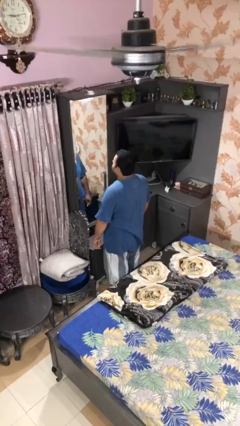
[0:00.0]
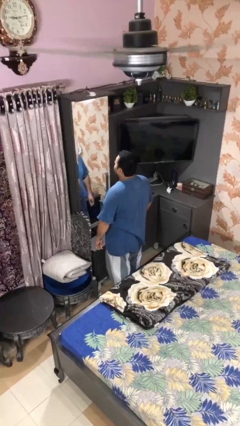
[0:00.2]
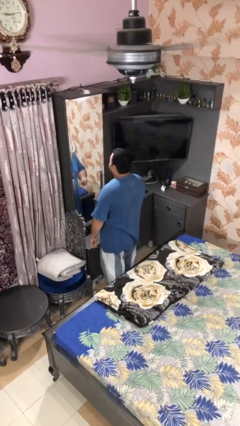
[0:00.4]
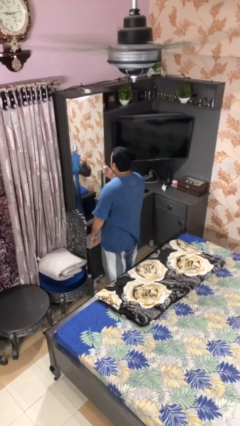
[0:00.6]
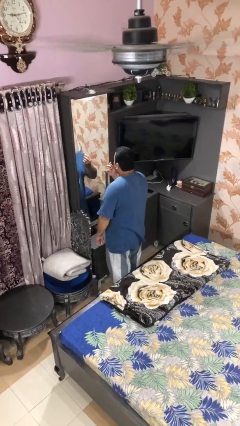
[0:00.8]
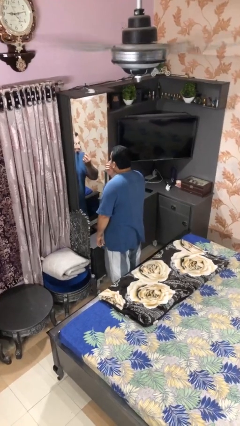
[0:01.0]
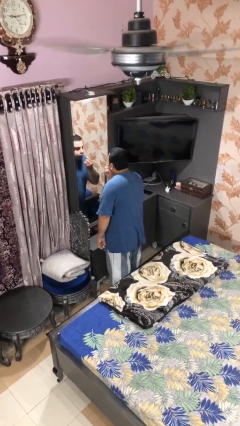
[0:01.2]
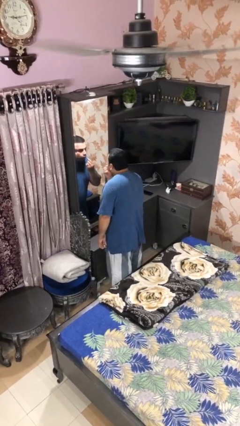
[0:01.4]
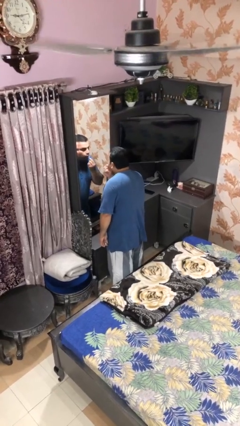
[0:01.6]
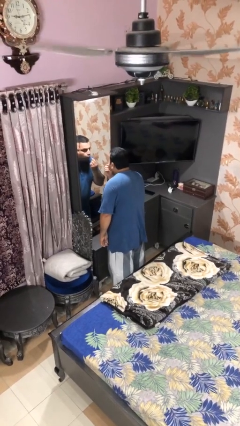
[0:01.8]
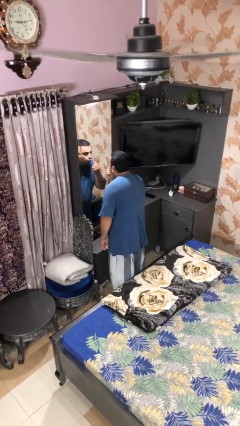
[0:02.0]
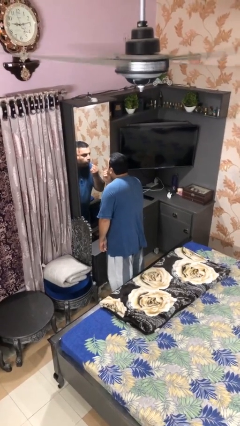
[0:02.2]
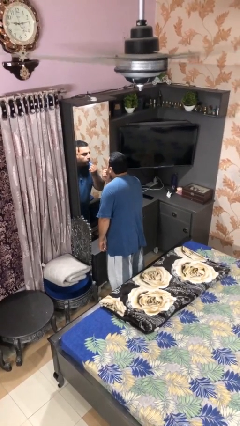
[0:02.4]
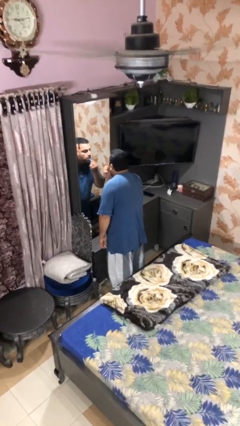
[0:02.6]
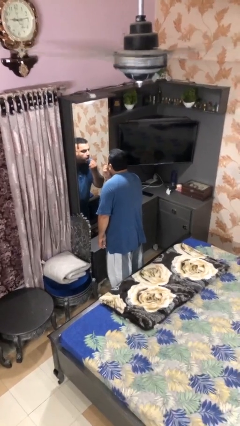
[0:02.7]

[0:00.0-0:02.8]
person applies lip makeup

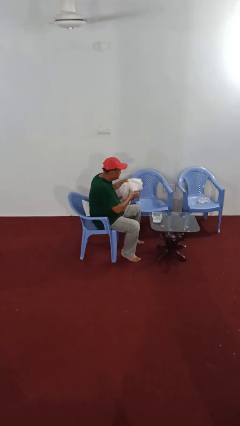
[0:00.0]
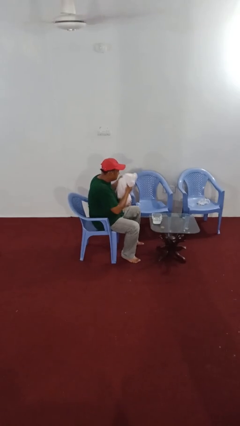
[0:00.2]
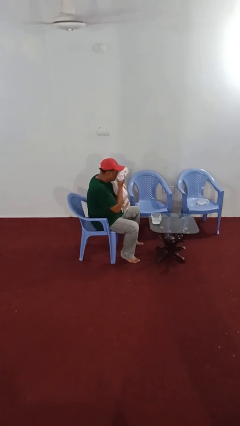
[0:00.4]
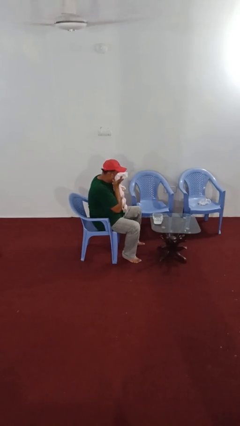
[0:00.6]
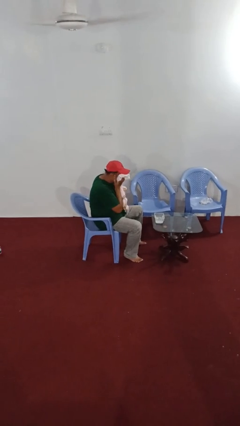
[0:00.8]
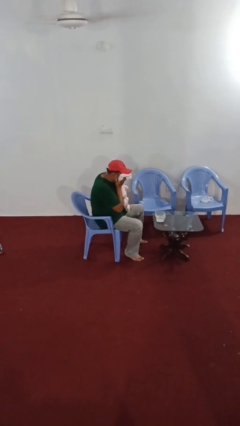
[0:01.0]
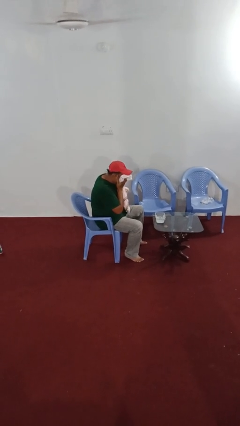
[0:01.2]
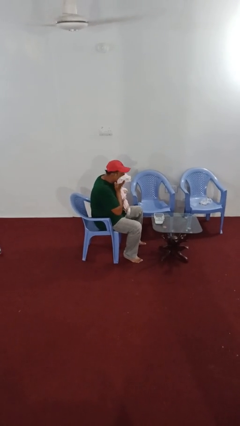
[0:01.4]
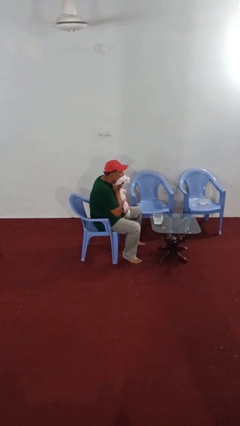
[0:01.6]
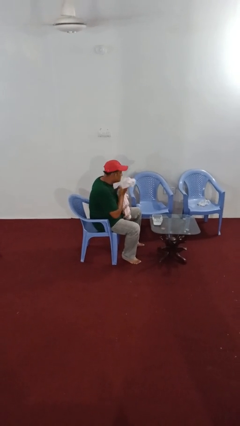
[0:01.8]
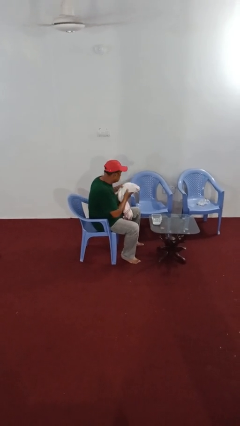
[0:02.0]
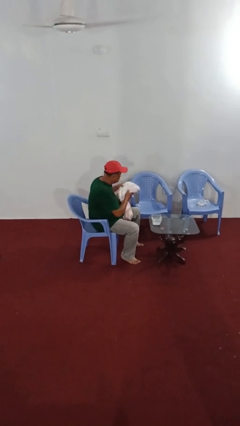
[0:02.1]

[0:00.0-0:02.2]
person dries face with towel

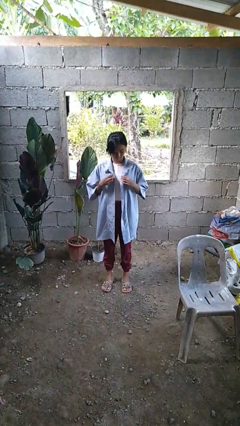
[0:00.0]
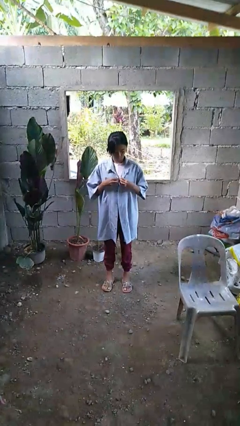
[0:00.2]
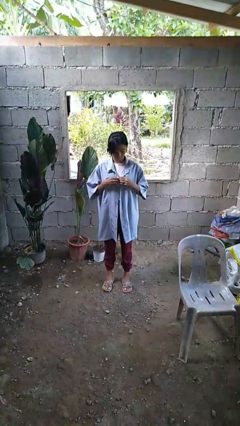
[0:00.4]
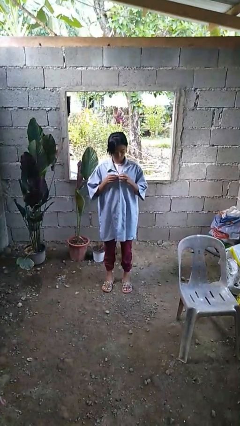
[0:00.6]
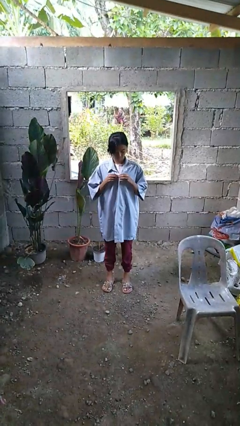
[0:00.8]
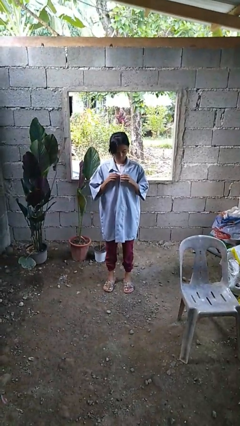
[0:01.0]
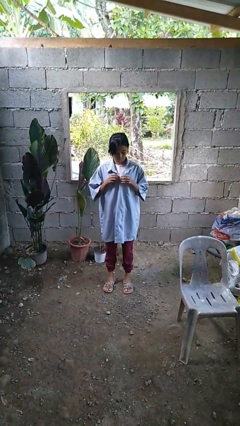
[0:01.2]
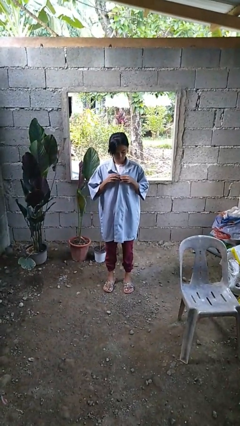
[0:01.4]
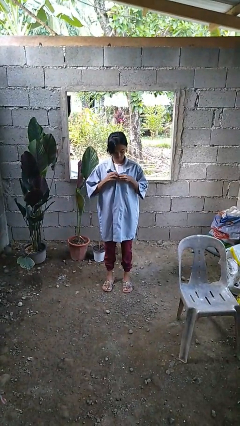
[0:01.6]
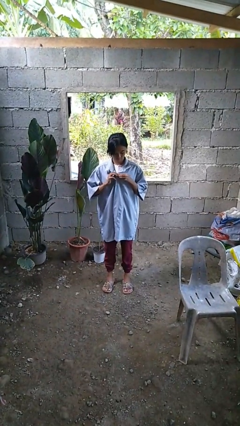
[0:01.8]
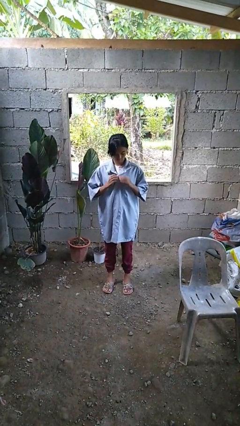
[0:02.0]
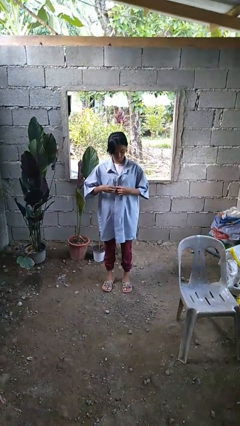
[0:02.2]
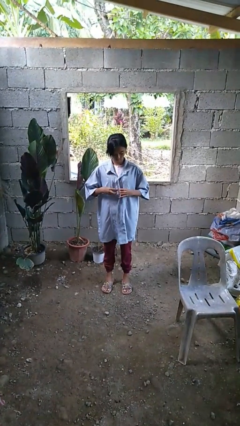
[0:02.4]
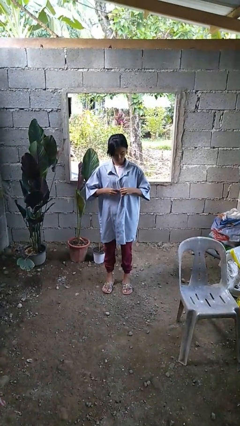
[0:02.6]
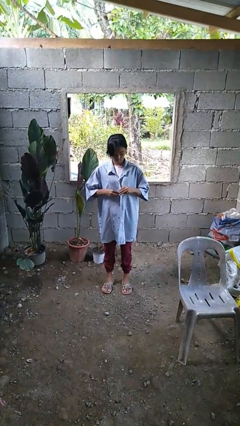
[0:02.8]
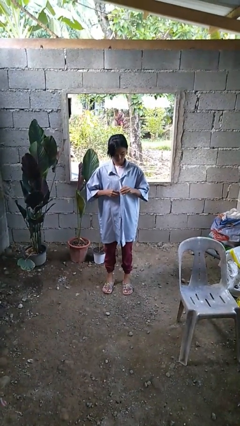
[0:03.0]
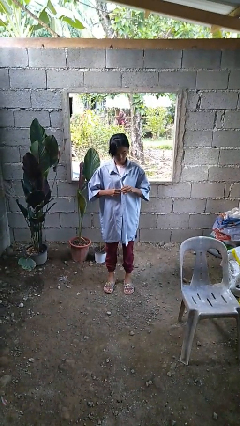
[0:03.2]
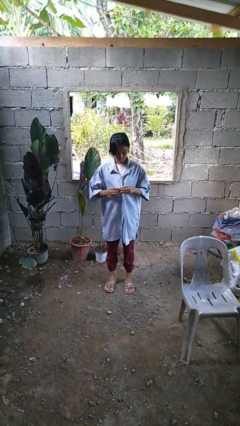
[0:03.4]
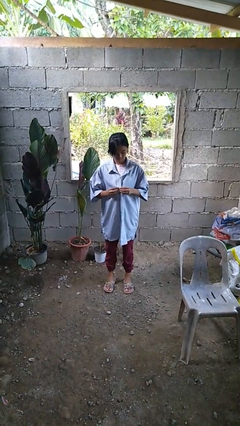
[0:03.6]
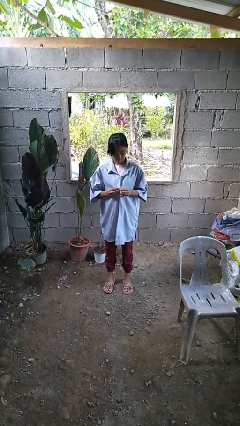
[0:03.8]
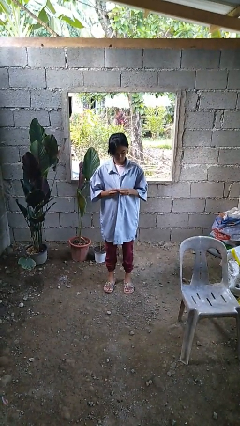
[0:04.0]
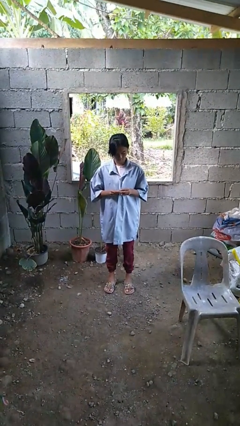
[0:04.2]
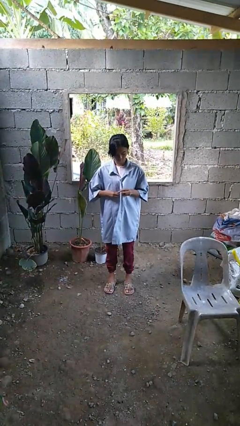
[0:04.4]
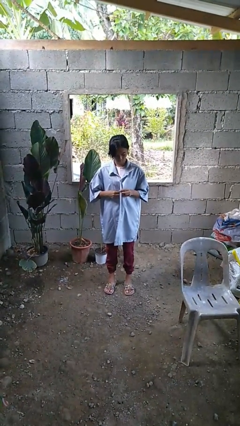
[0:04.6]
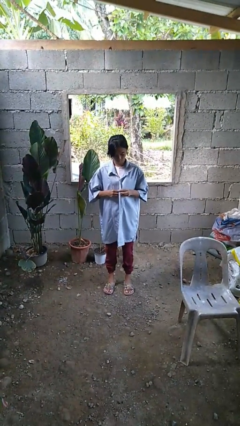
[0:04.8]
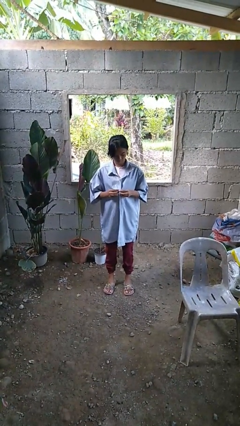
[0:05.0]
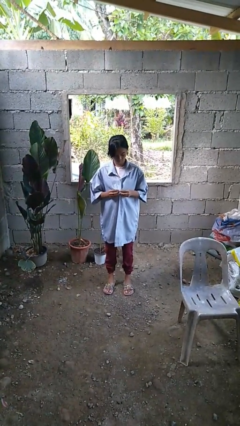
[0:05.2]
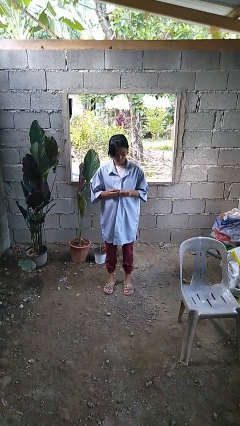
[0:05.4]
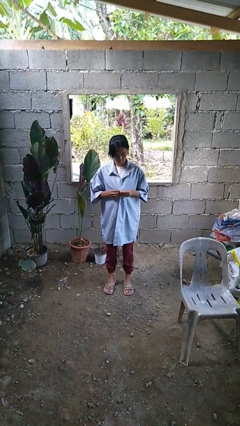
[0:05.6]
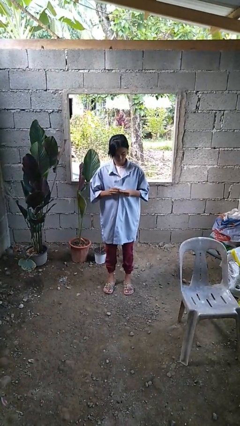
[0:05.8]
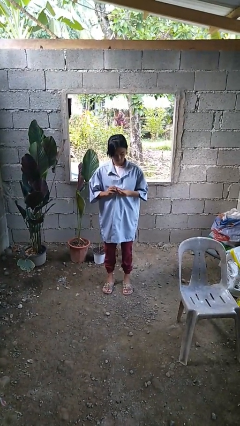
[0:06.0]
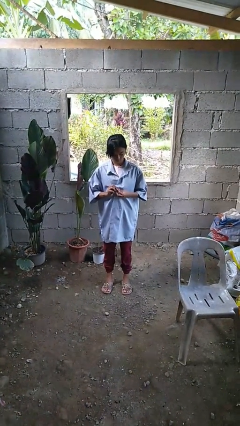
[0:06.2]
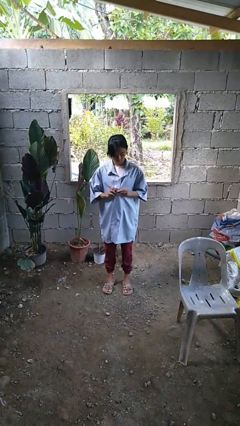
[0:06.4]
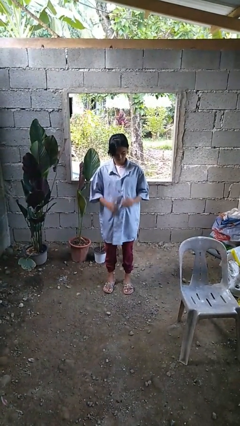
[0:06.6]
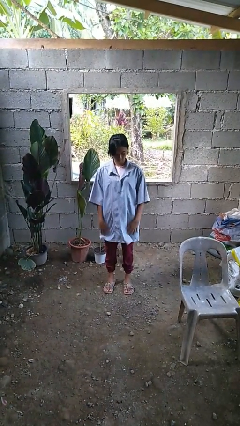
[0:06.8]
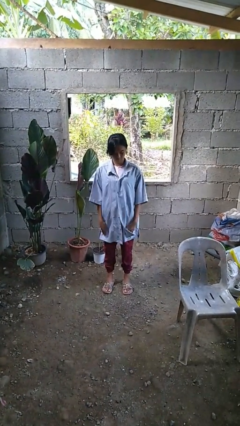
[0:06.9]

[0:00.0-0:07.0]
person buttons shirt

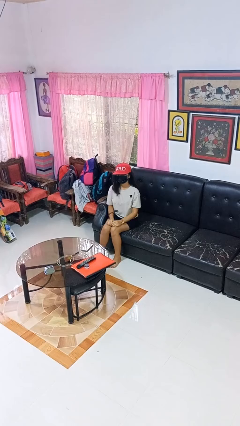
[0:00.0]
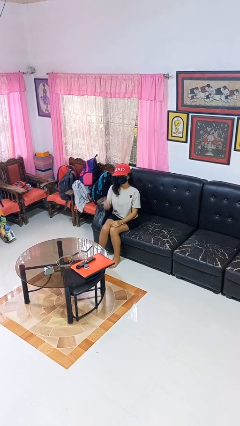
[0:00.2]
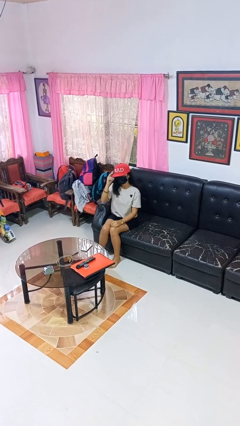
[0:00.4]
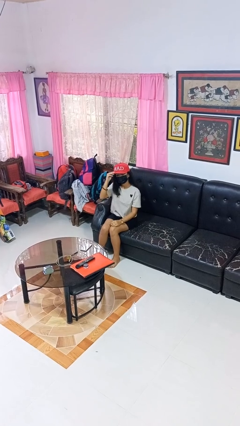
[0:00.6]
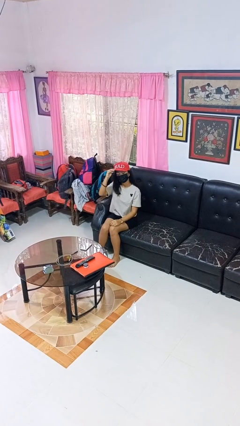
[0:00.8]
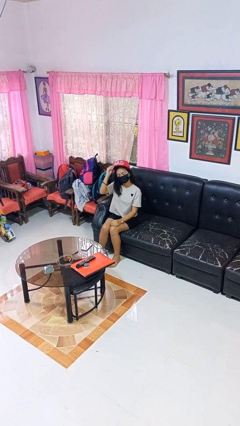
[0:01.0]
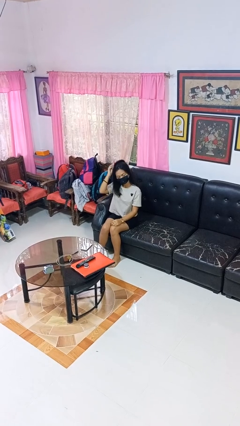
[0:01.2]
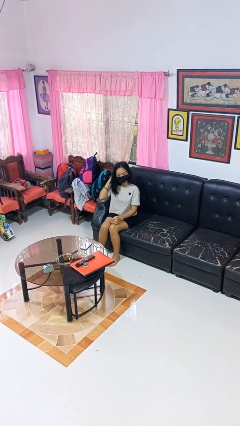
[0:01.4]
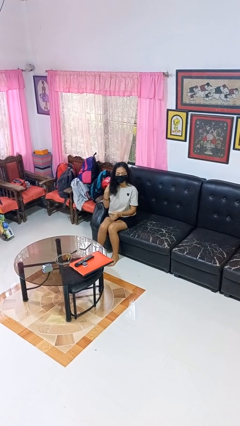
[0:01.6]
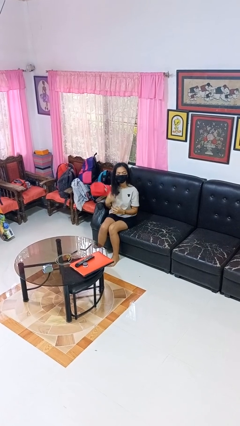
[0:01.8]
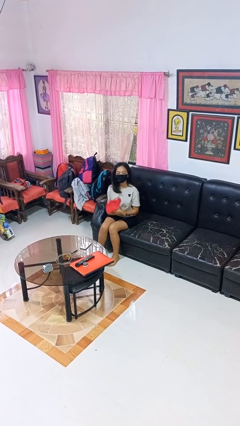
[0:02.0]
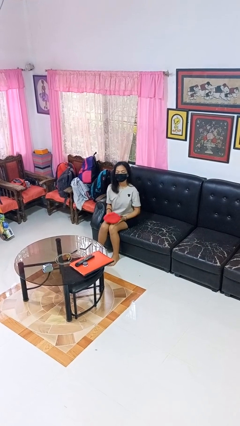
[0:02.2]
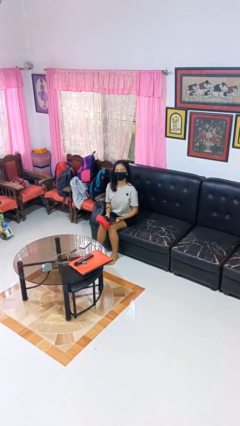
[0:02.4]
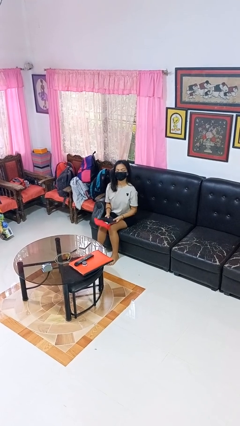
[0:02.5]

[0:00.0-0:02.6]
person takes off hat

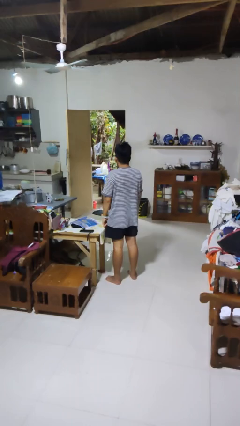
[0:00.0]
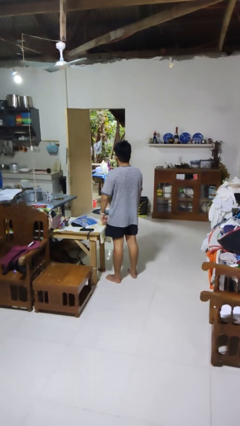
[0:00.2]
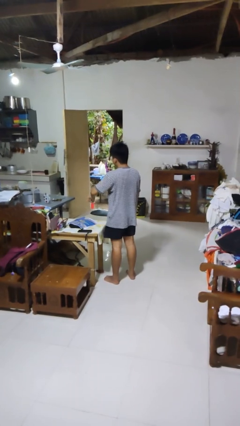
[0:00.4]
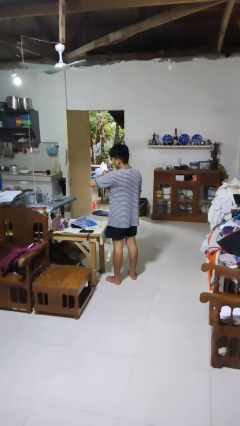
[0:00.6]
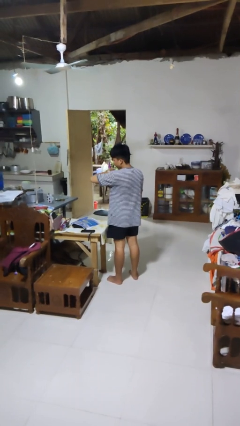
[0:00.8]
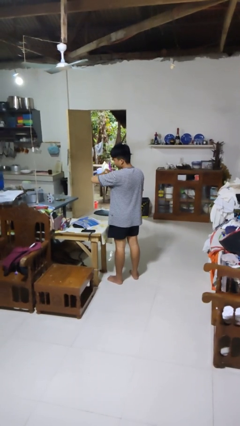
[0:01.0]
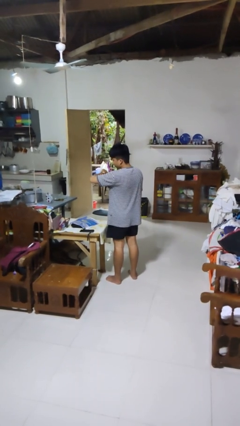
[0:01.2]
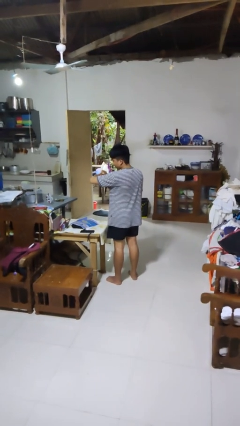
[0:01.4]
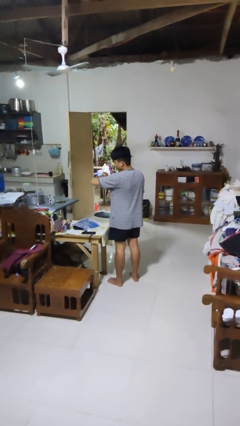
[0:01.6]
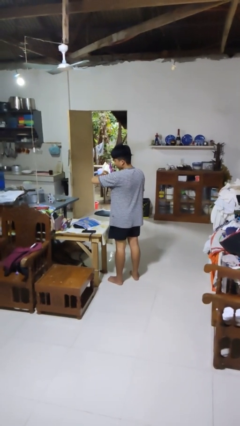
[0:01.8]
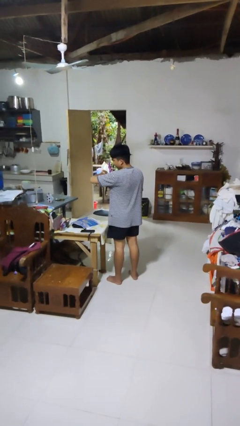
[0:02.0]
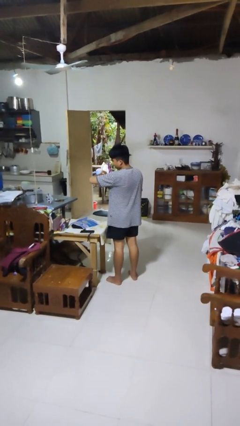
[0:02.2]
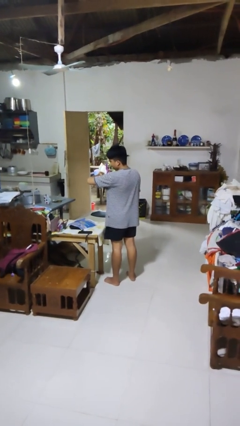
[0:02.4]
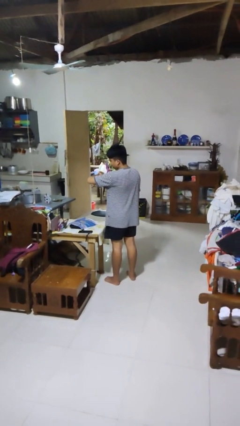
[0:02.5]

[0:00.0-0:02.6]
person looks at wristwatch
